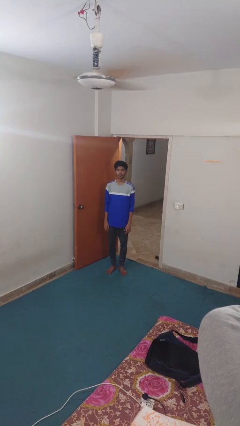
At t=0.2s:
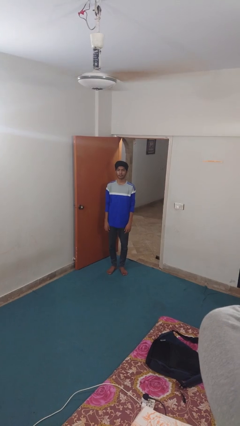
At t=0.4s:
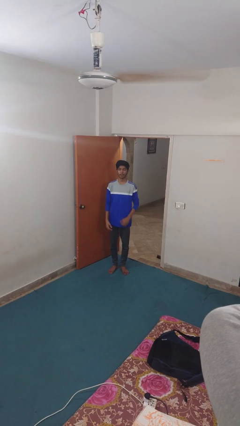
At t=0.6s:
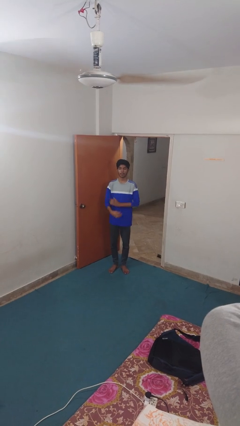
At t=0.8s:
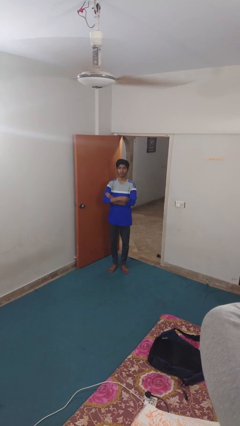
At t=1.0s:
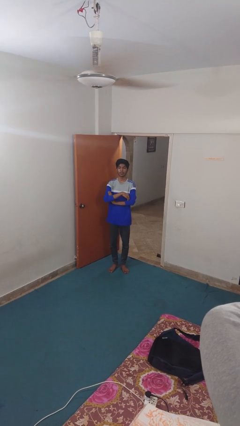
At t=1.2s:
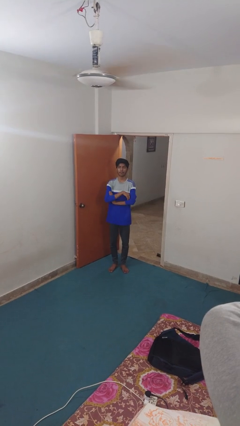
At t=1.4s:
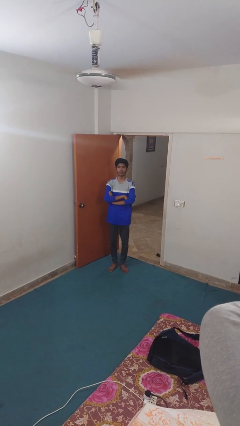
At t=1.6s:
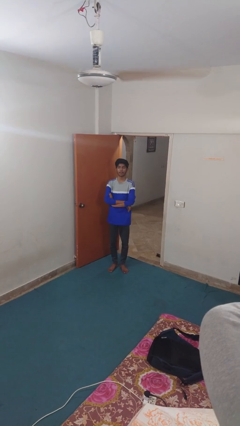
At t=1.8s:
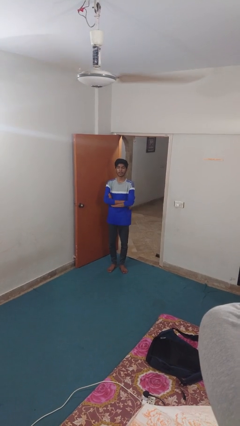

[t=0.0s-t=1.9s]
person crosses arms

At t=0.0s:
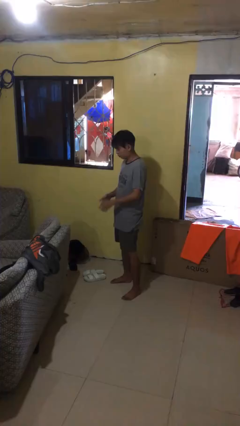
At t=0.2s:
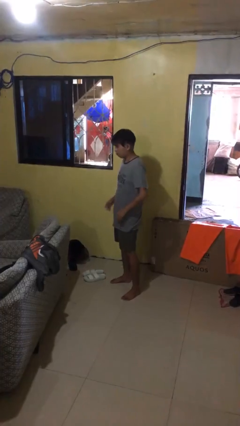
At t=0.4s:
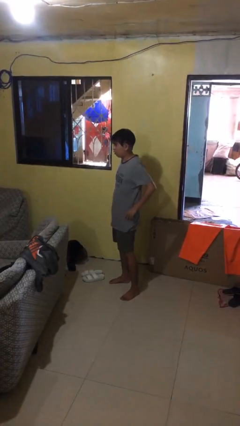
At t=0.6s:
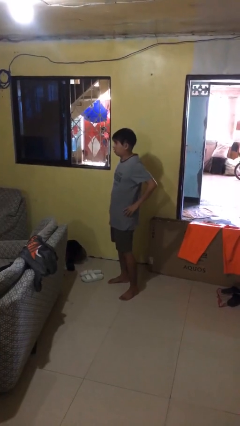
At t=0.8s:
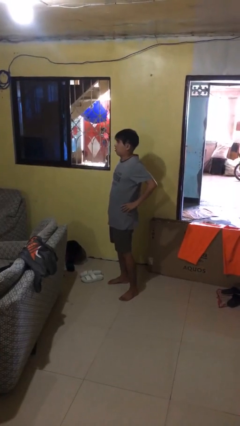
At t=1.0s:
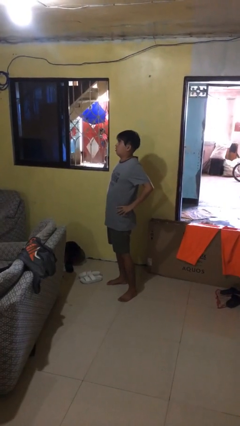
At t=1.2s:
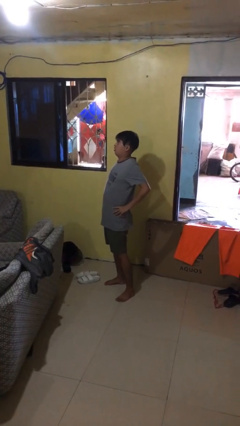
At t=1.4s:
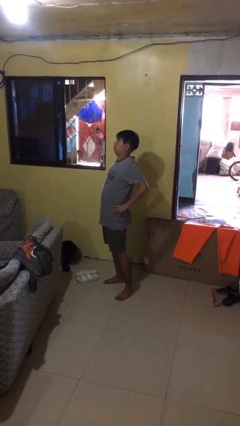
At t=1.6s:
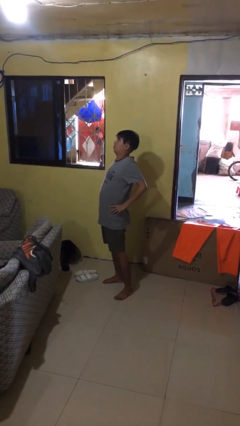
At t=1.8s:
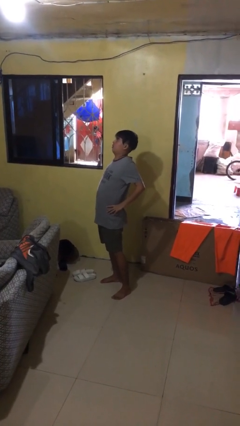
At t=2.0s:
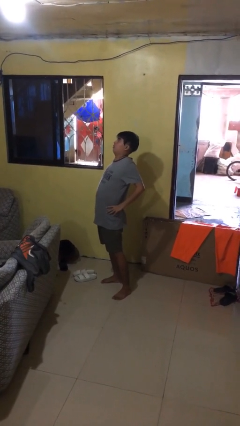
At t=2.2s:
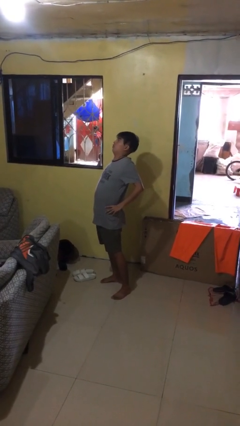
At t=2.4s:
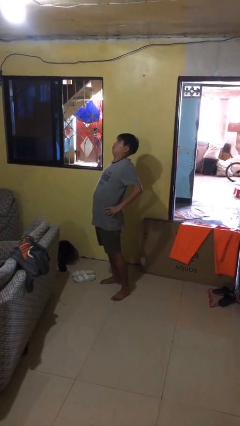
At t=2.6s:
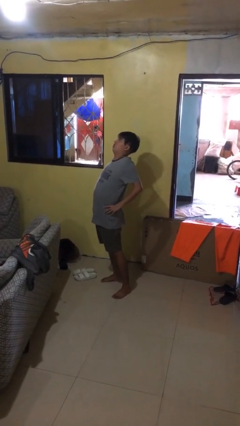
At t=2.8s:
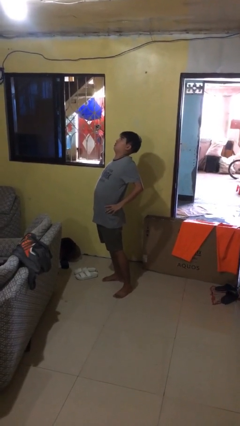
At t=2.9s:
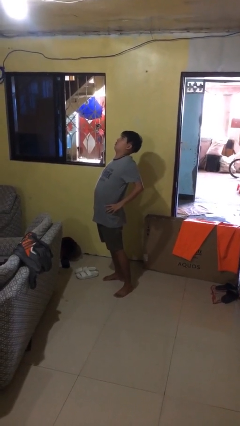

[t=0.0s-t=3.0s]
person stretches back

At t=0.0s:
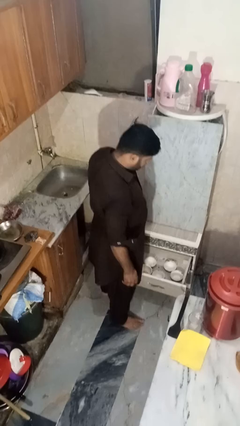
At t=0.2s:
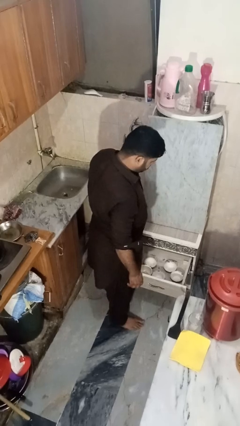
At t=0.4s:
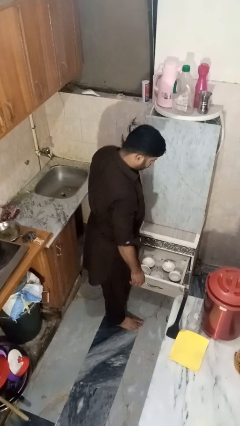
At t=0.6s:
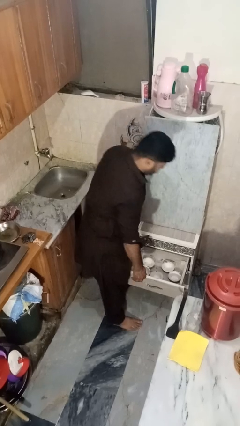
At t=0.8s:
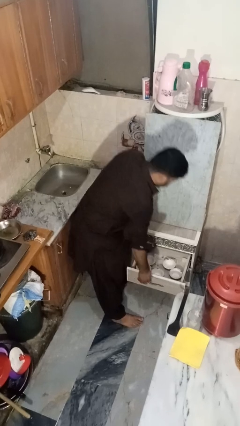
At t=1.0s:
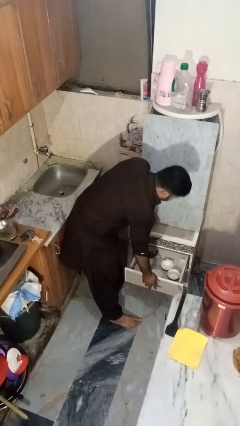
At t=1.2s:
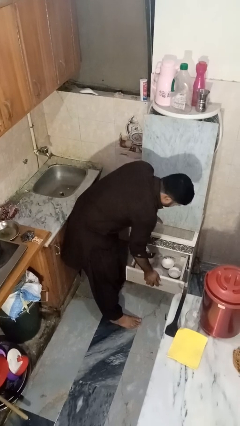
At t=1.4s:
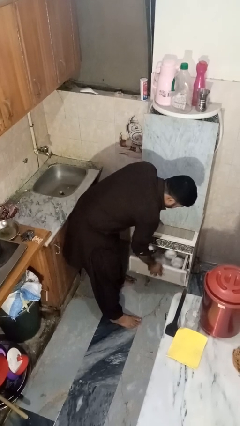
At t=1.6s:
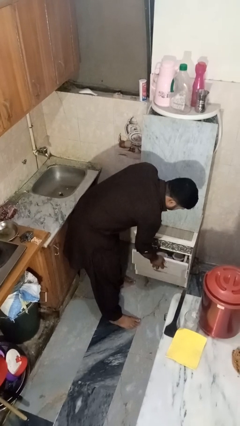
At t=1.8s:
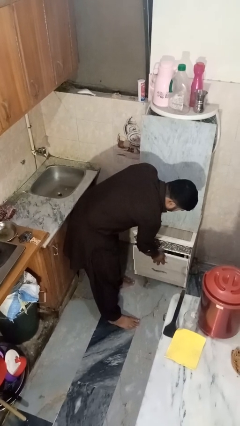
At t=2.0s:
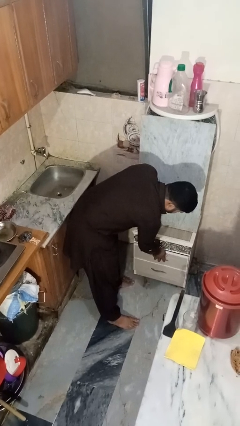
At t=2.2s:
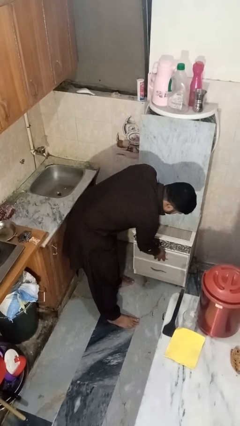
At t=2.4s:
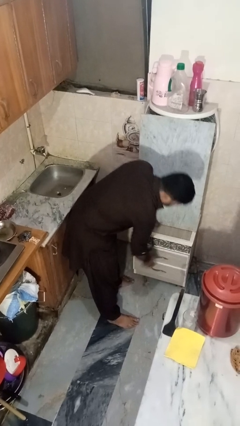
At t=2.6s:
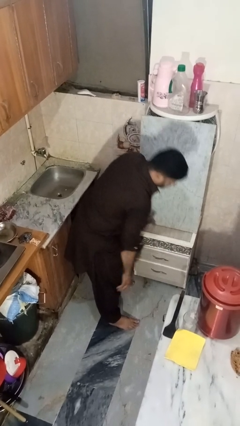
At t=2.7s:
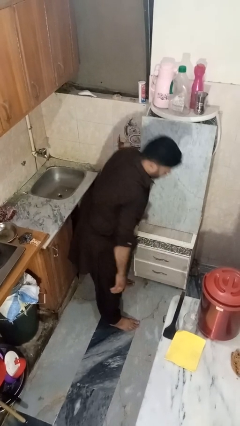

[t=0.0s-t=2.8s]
person closes kitchen drawer

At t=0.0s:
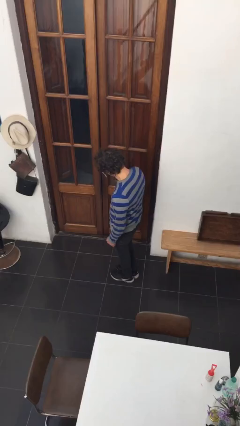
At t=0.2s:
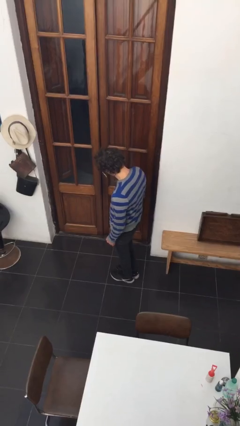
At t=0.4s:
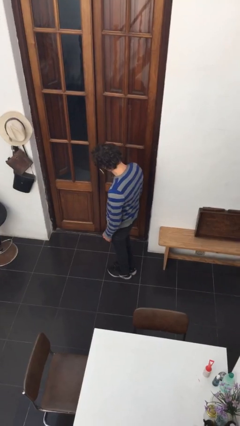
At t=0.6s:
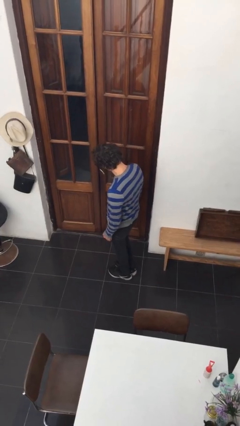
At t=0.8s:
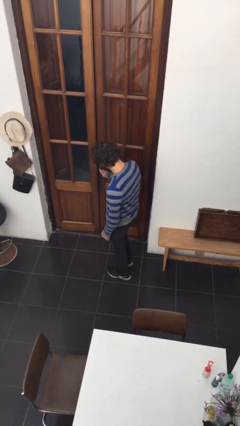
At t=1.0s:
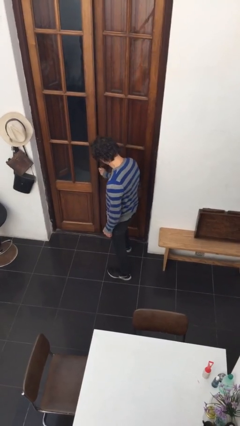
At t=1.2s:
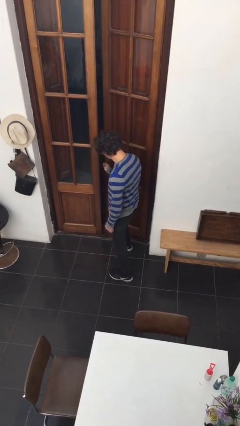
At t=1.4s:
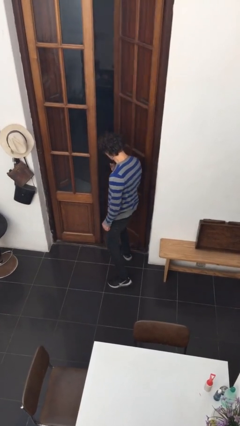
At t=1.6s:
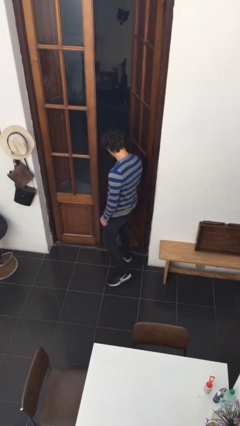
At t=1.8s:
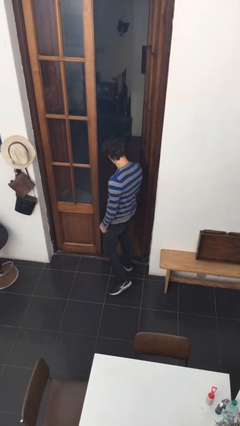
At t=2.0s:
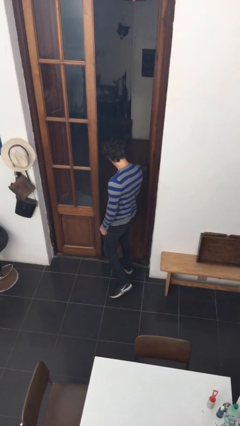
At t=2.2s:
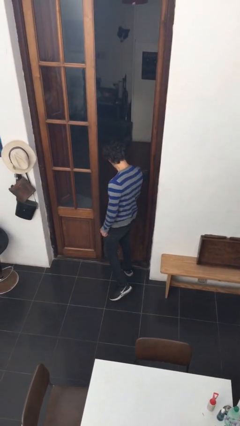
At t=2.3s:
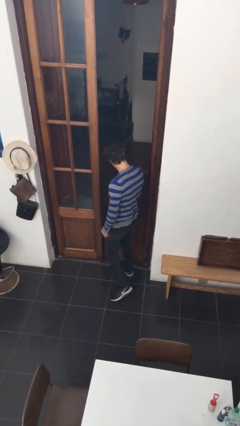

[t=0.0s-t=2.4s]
person opens facility door

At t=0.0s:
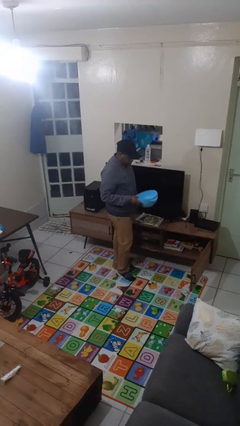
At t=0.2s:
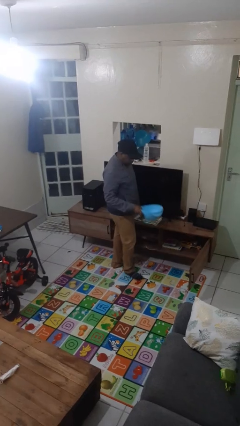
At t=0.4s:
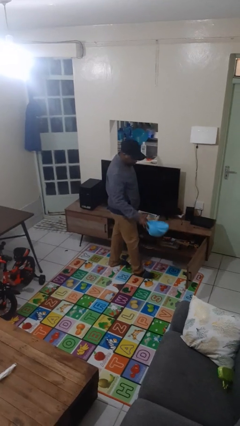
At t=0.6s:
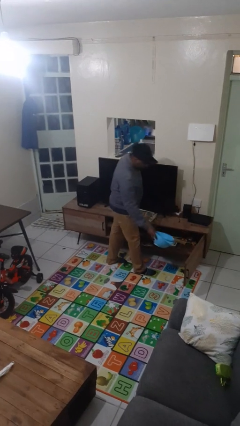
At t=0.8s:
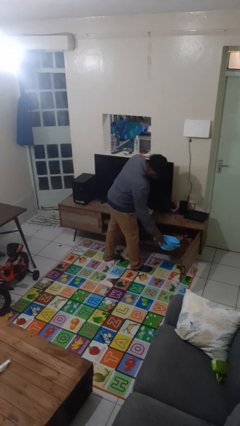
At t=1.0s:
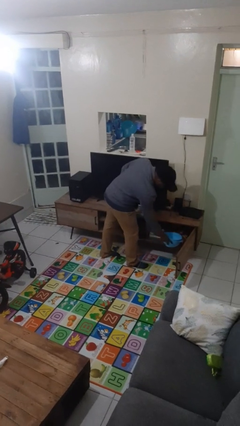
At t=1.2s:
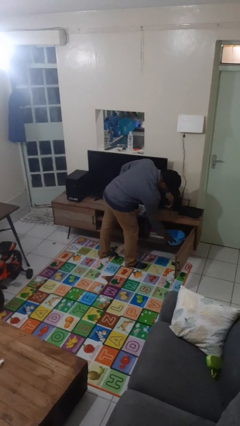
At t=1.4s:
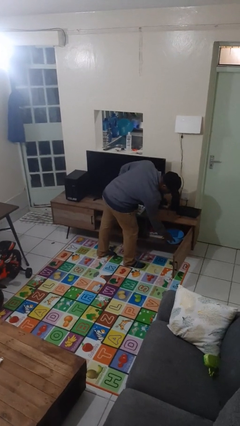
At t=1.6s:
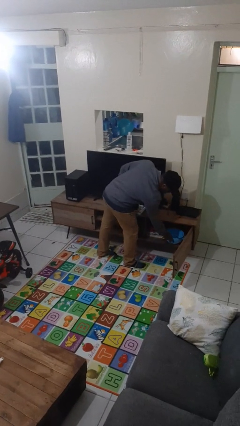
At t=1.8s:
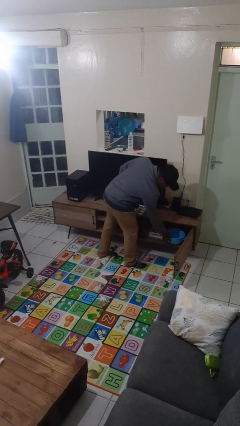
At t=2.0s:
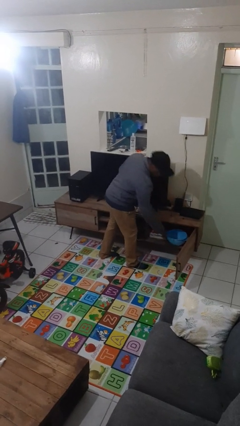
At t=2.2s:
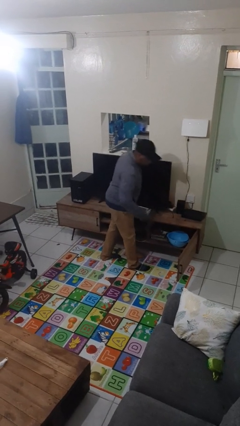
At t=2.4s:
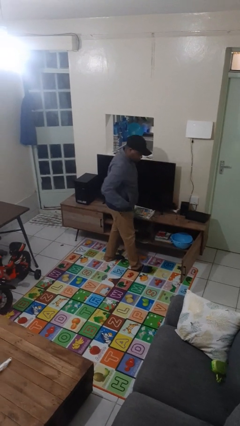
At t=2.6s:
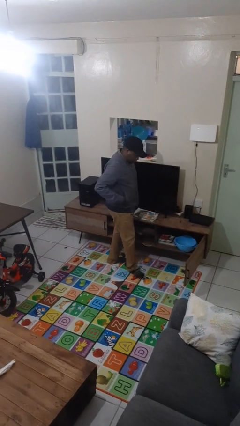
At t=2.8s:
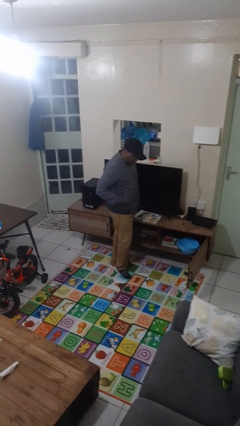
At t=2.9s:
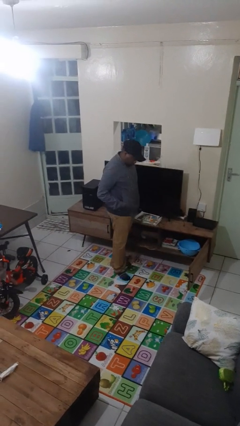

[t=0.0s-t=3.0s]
person puts down object into cabinet

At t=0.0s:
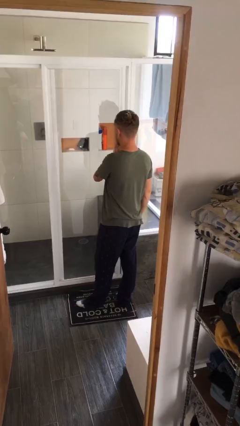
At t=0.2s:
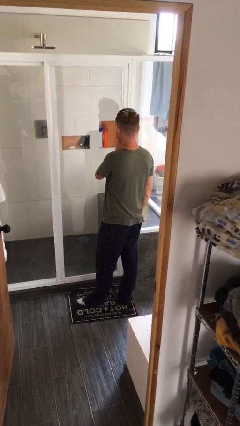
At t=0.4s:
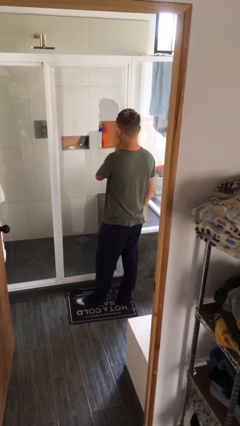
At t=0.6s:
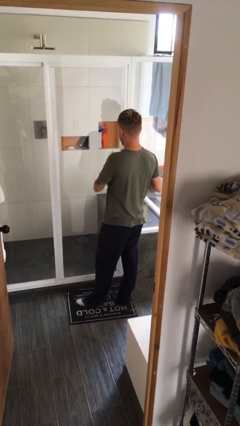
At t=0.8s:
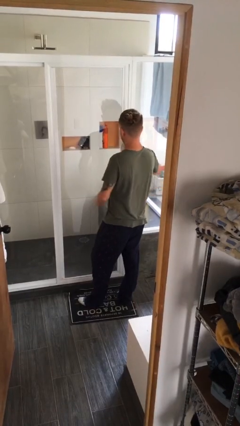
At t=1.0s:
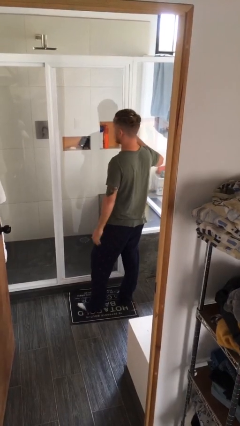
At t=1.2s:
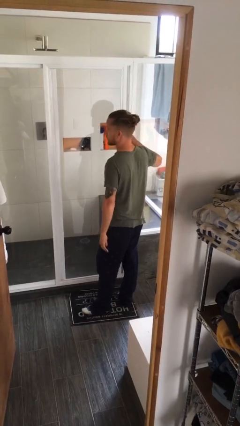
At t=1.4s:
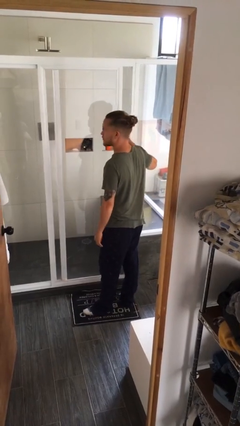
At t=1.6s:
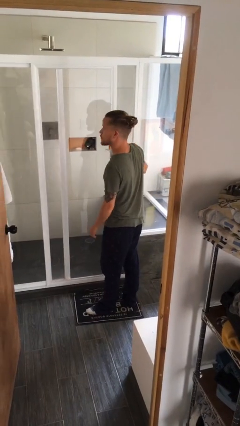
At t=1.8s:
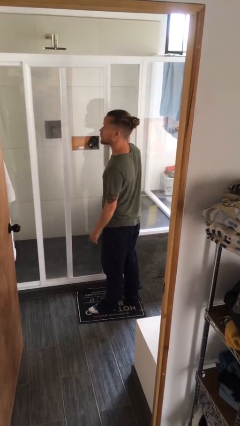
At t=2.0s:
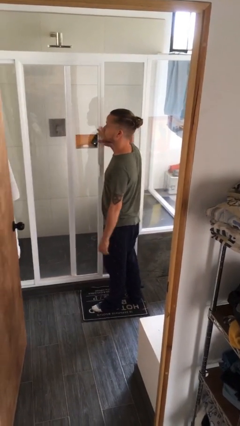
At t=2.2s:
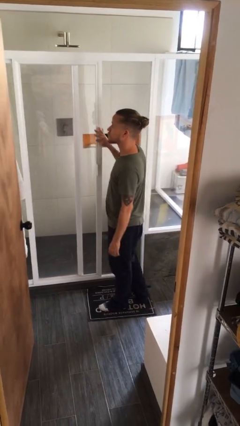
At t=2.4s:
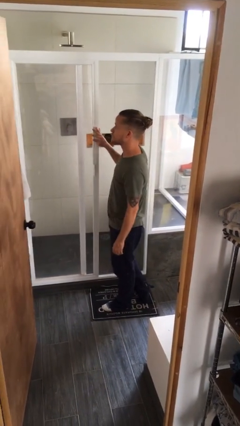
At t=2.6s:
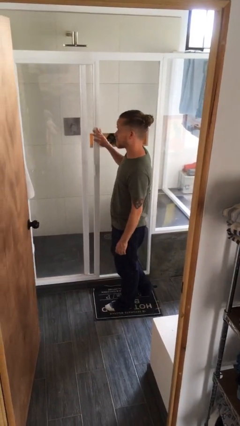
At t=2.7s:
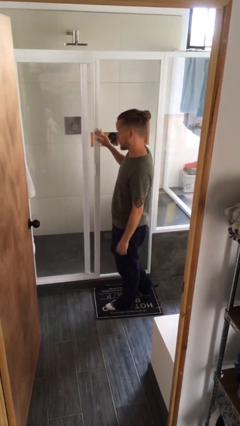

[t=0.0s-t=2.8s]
person opens sliding door

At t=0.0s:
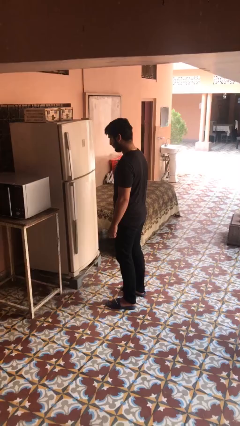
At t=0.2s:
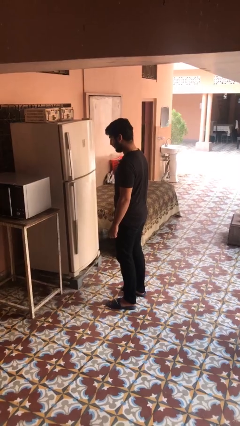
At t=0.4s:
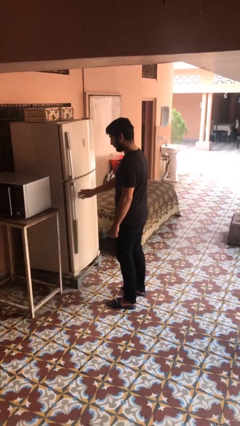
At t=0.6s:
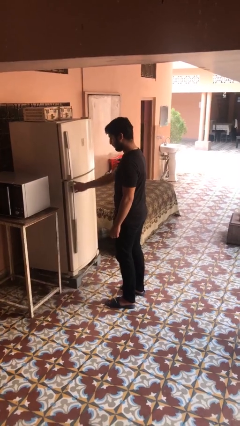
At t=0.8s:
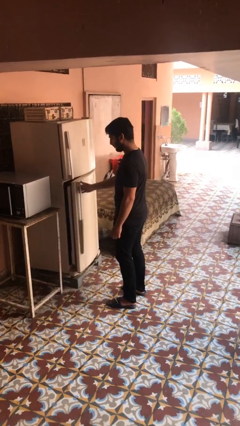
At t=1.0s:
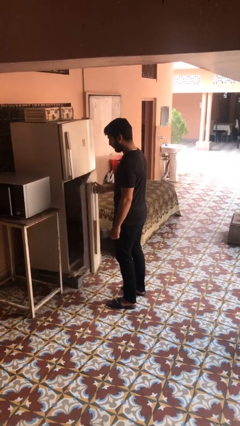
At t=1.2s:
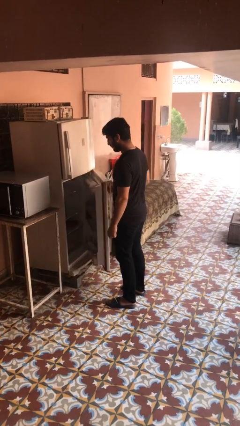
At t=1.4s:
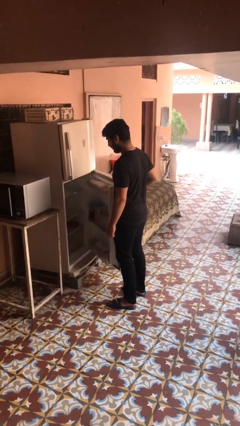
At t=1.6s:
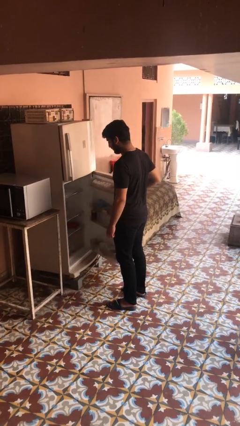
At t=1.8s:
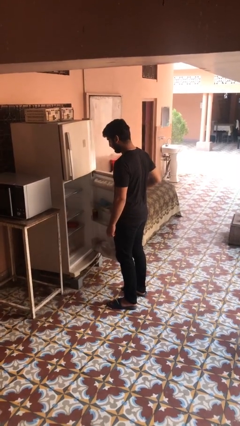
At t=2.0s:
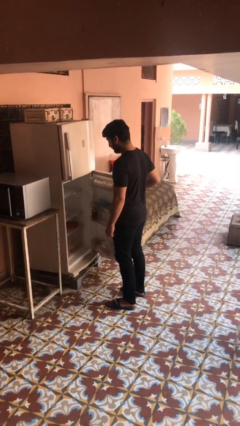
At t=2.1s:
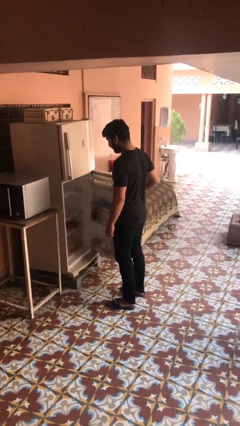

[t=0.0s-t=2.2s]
person opens refrigerator
